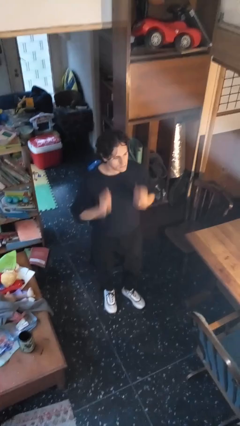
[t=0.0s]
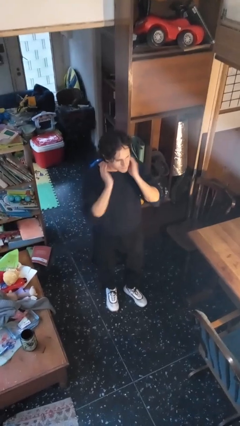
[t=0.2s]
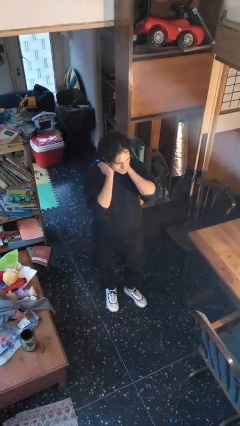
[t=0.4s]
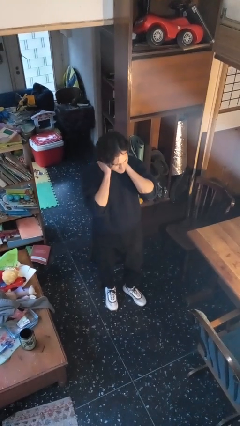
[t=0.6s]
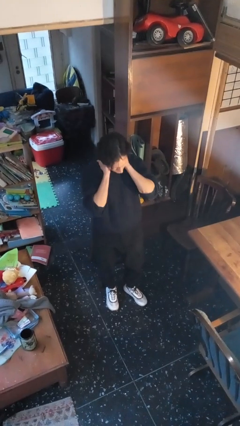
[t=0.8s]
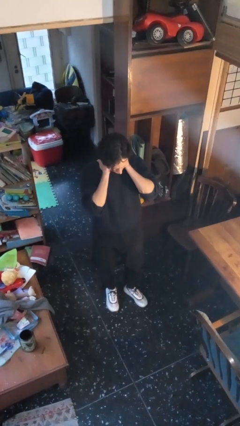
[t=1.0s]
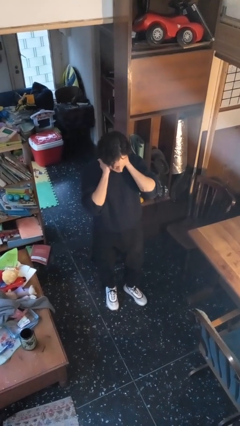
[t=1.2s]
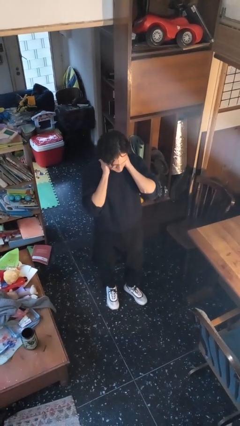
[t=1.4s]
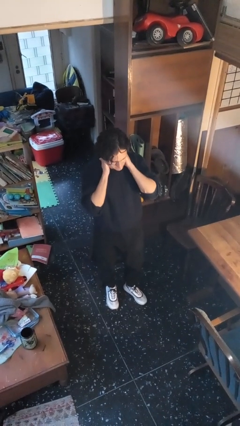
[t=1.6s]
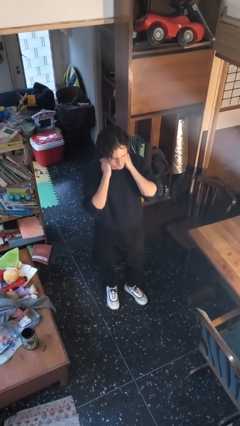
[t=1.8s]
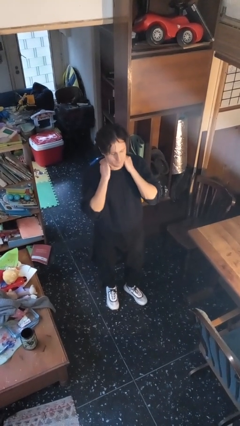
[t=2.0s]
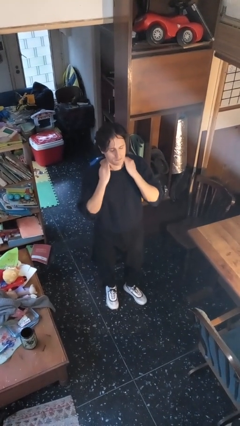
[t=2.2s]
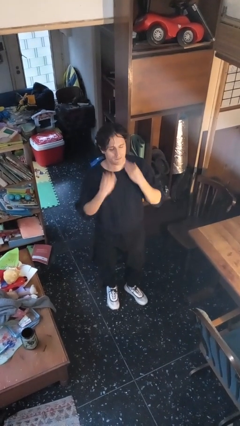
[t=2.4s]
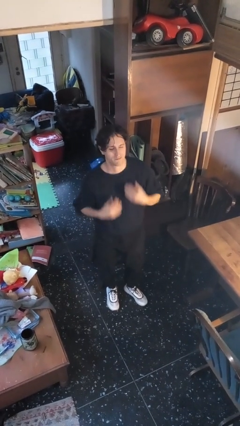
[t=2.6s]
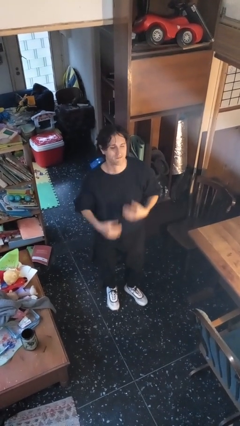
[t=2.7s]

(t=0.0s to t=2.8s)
person rubs neck

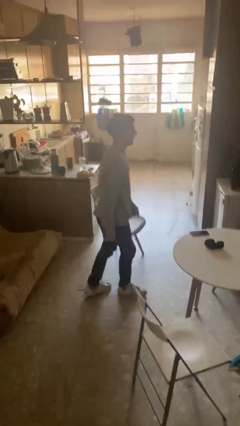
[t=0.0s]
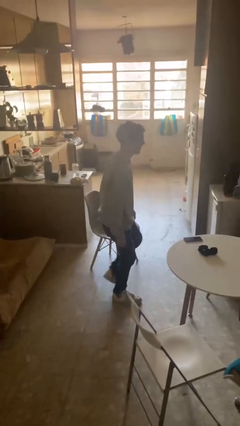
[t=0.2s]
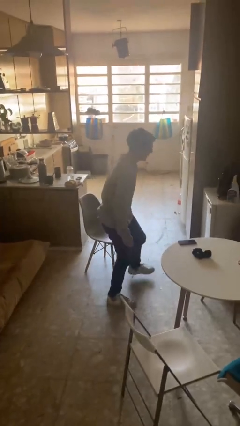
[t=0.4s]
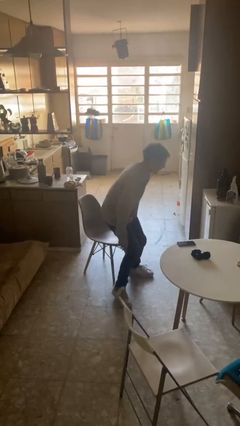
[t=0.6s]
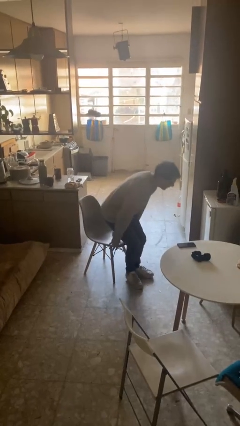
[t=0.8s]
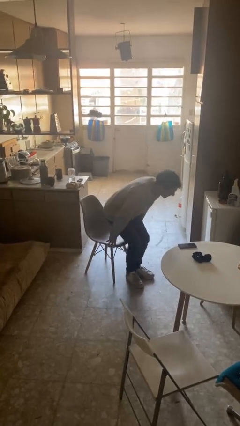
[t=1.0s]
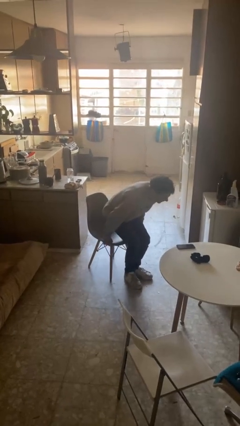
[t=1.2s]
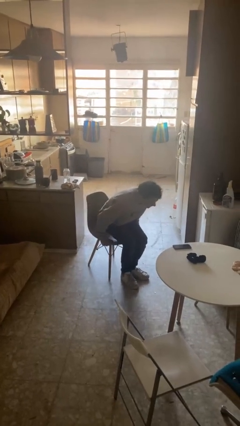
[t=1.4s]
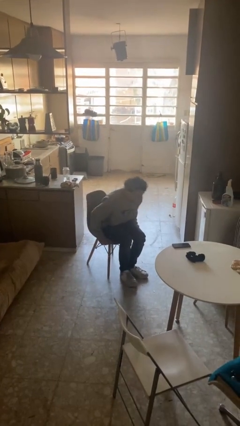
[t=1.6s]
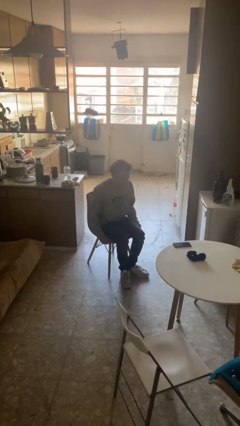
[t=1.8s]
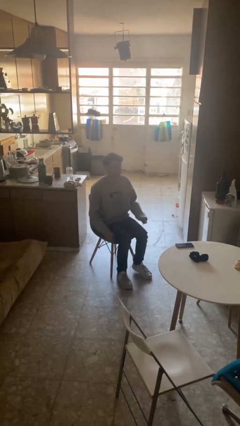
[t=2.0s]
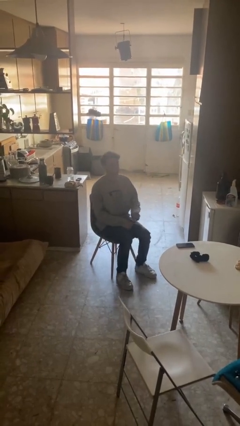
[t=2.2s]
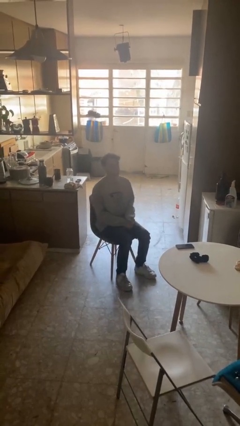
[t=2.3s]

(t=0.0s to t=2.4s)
person sits down

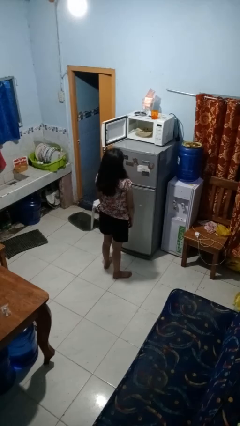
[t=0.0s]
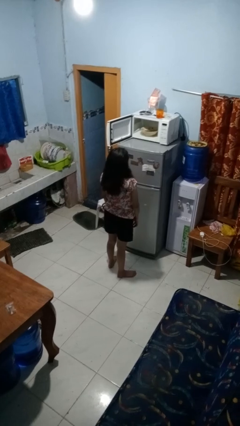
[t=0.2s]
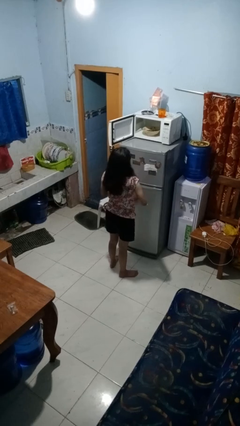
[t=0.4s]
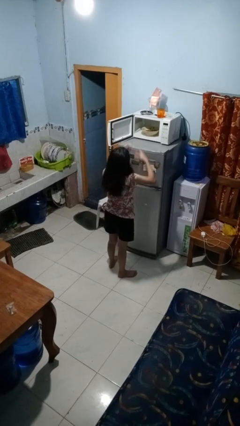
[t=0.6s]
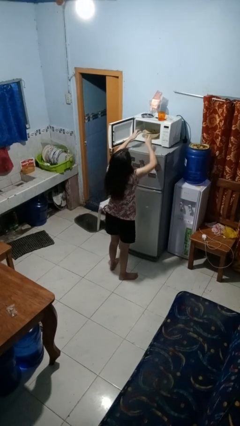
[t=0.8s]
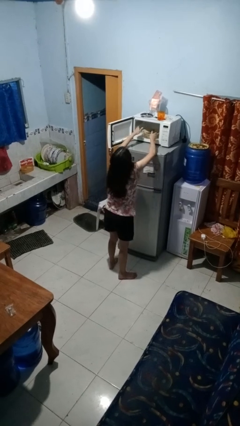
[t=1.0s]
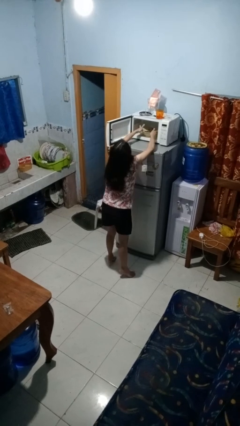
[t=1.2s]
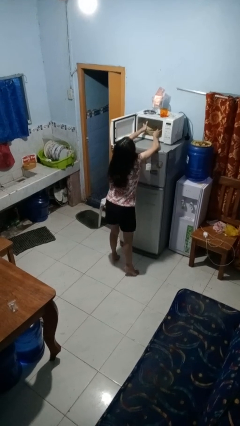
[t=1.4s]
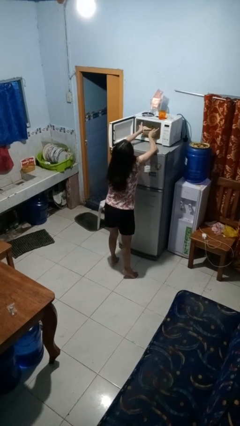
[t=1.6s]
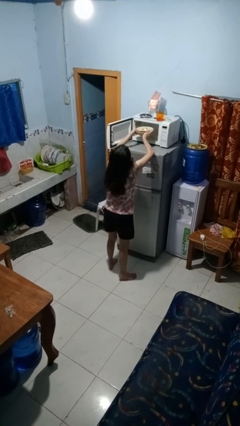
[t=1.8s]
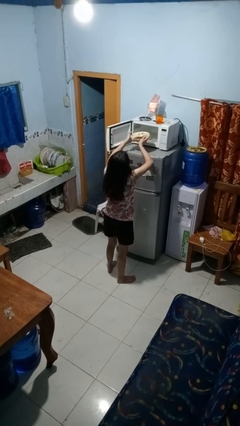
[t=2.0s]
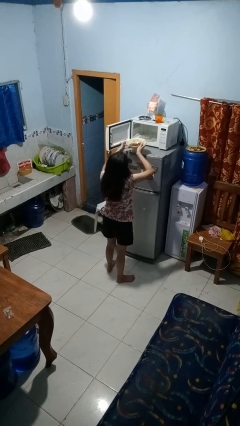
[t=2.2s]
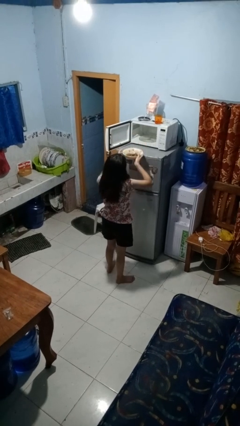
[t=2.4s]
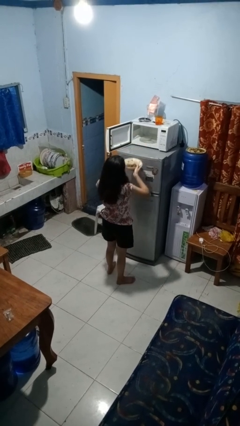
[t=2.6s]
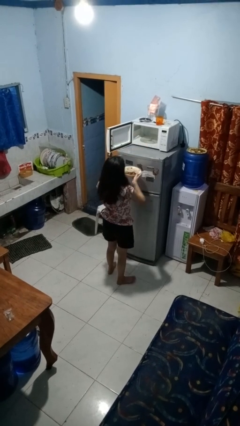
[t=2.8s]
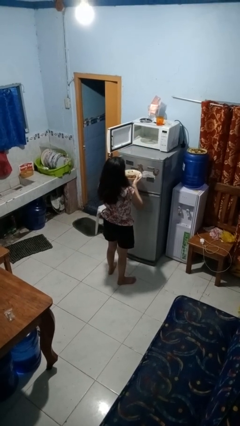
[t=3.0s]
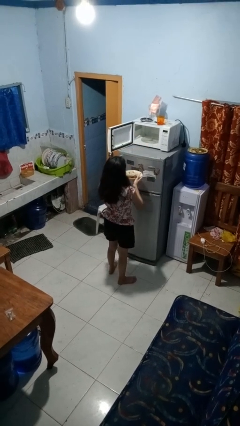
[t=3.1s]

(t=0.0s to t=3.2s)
person takes object from microwave

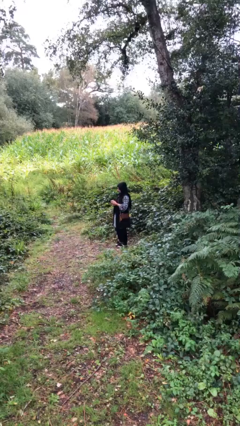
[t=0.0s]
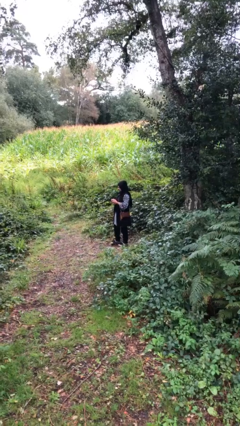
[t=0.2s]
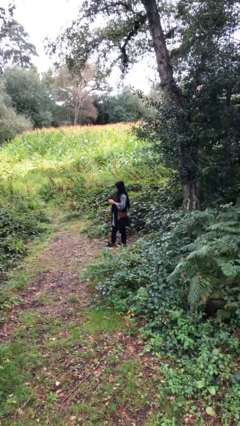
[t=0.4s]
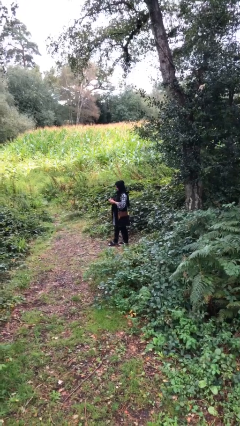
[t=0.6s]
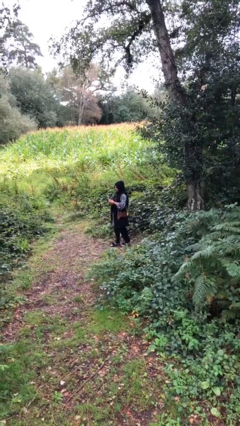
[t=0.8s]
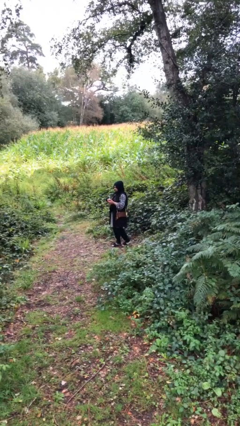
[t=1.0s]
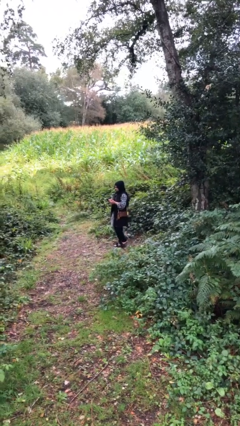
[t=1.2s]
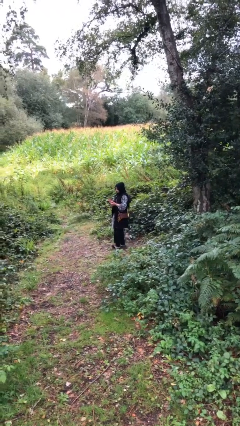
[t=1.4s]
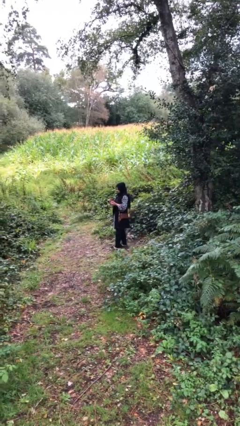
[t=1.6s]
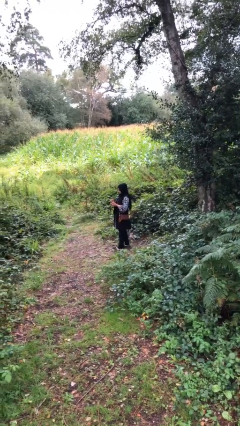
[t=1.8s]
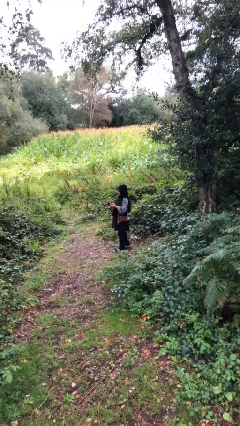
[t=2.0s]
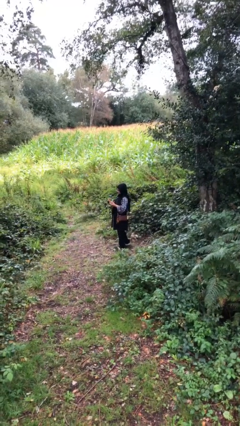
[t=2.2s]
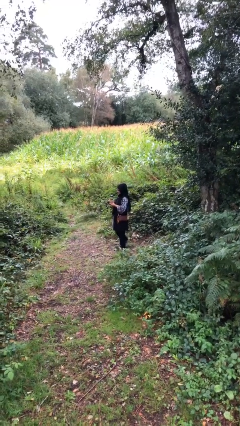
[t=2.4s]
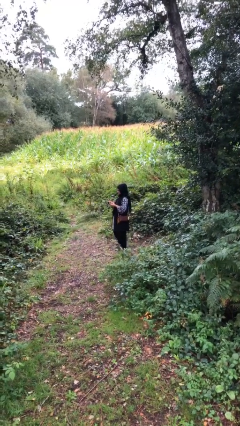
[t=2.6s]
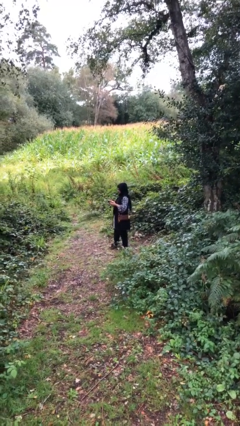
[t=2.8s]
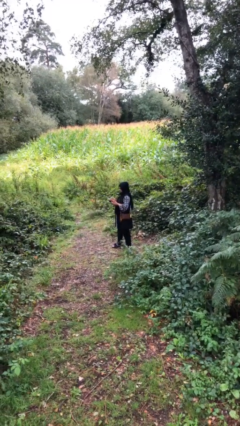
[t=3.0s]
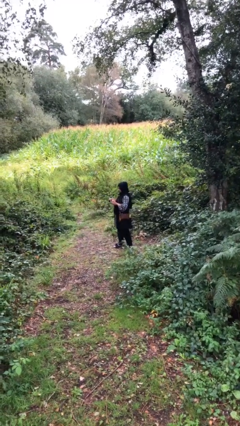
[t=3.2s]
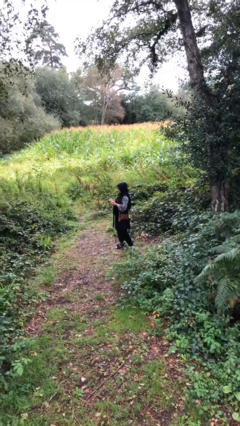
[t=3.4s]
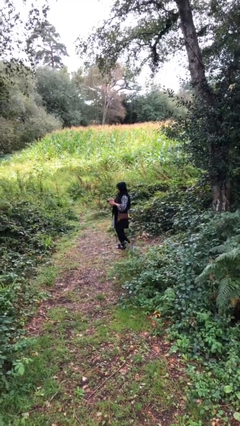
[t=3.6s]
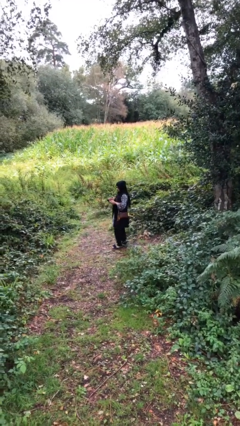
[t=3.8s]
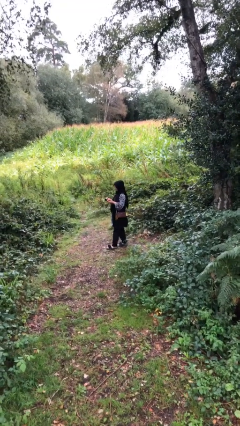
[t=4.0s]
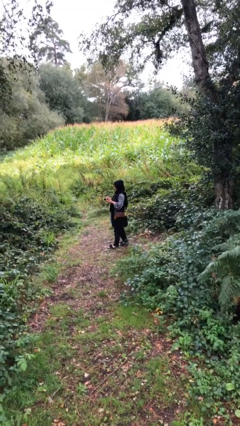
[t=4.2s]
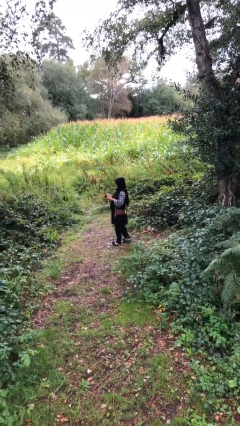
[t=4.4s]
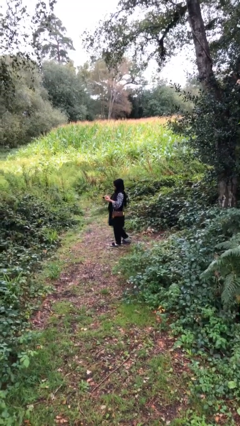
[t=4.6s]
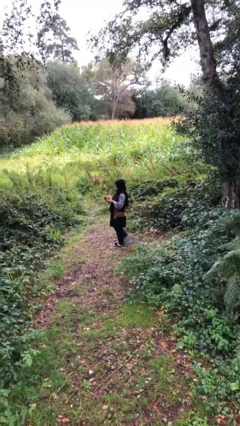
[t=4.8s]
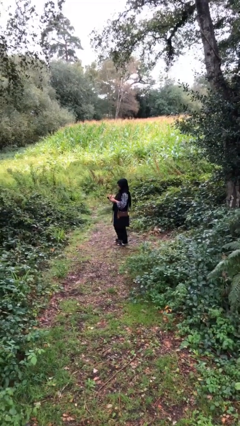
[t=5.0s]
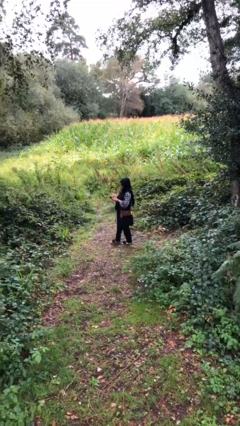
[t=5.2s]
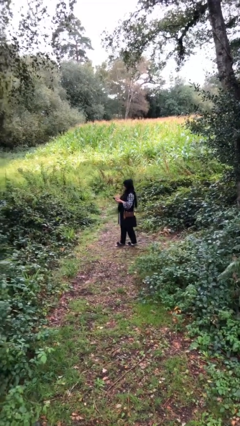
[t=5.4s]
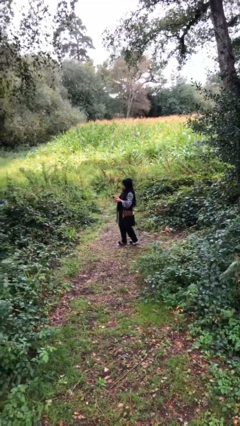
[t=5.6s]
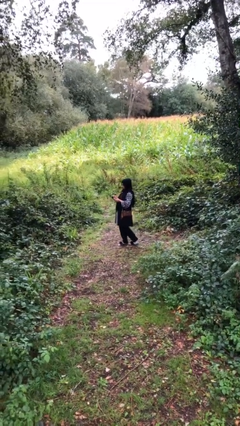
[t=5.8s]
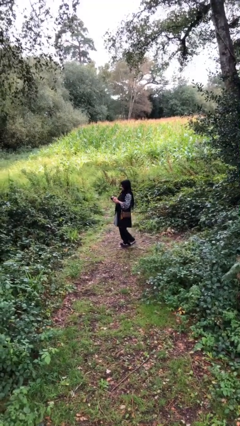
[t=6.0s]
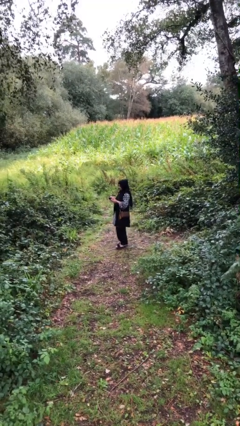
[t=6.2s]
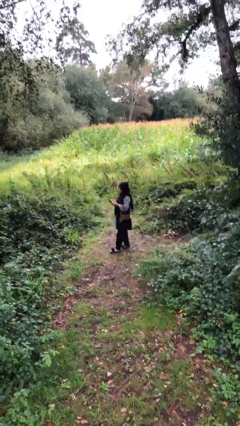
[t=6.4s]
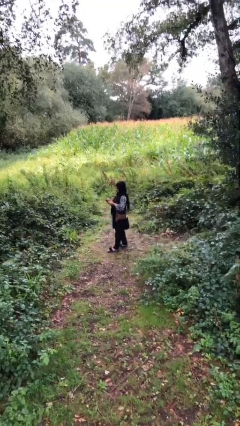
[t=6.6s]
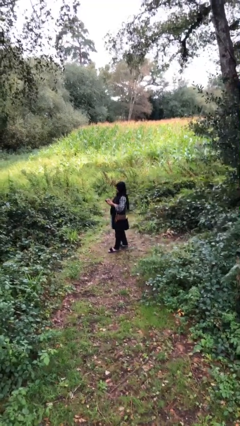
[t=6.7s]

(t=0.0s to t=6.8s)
person texts on phone

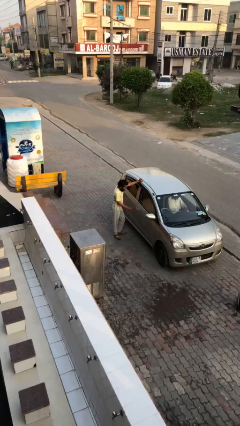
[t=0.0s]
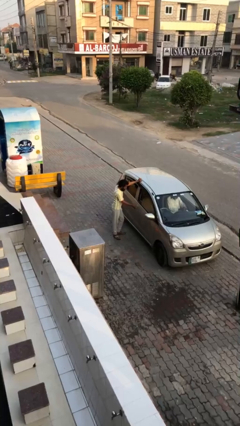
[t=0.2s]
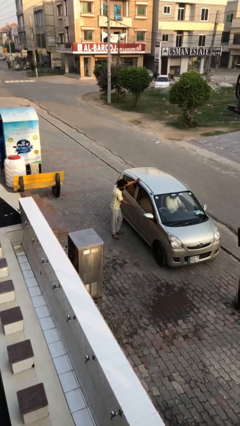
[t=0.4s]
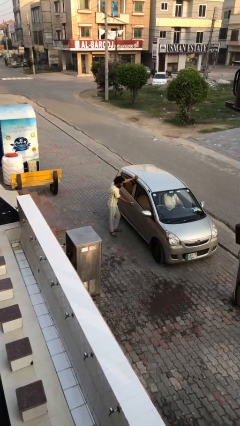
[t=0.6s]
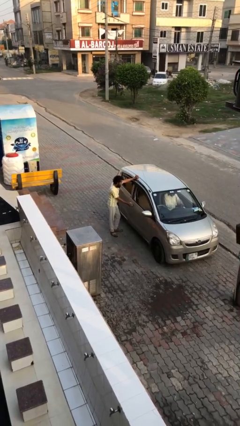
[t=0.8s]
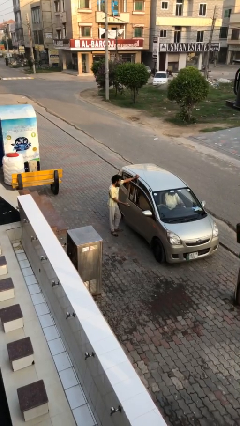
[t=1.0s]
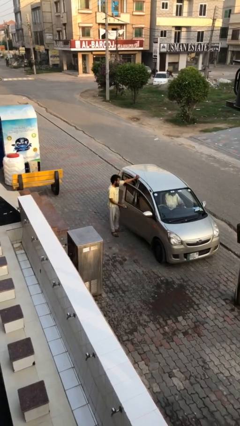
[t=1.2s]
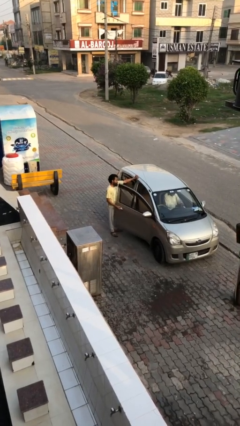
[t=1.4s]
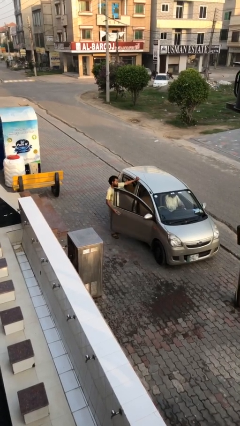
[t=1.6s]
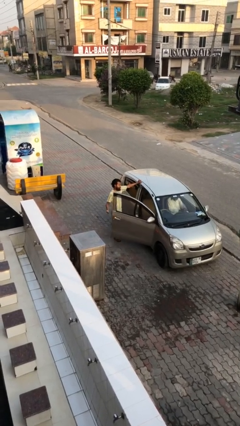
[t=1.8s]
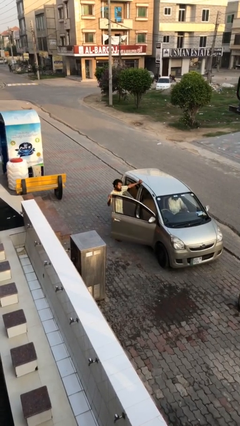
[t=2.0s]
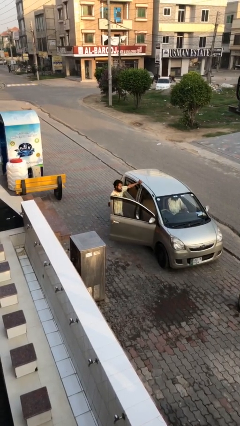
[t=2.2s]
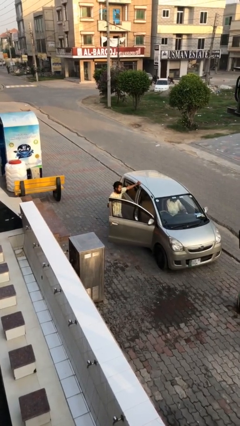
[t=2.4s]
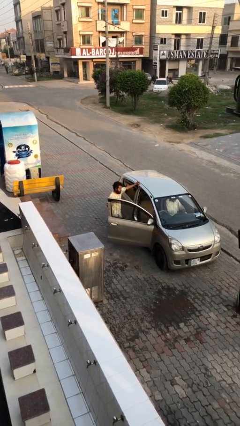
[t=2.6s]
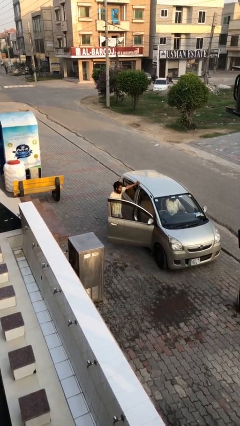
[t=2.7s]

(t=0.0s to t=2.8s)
person opens car door
